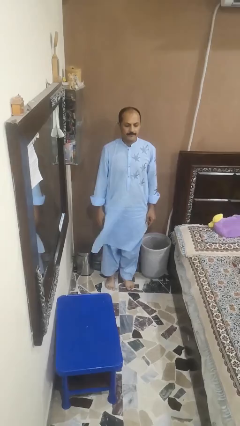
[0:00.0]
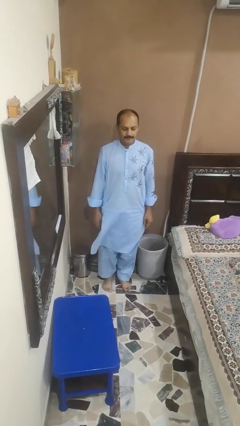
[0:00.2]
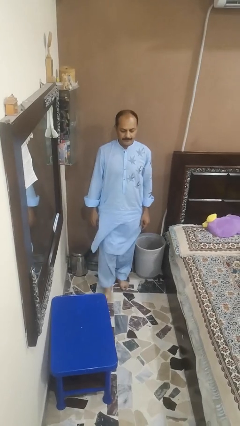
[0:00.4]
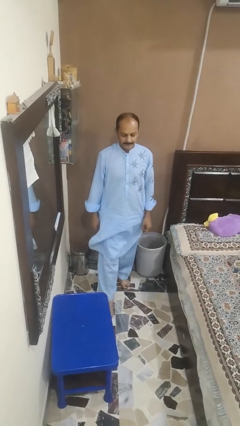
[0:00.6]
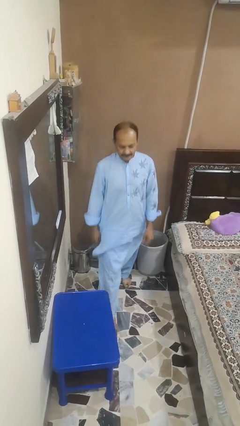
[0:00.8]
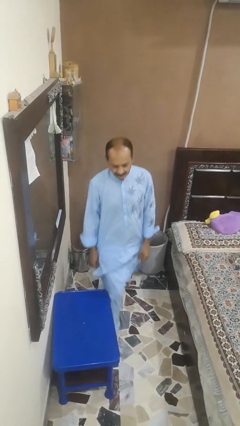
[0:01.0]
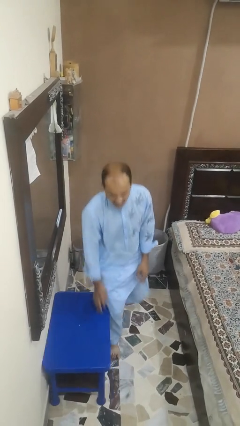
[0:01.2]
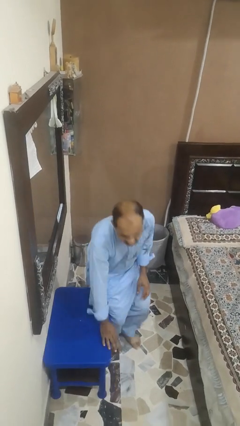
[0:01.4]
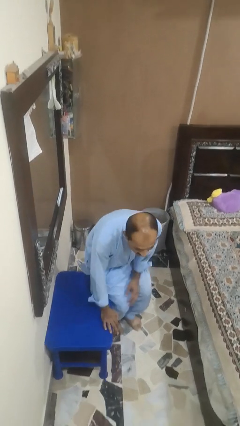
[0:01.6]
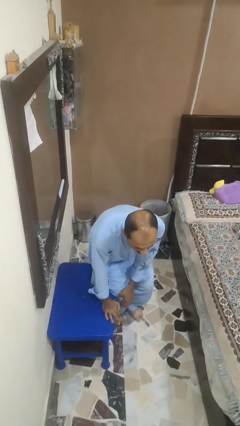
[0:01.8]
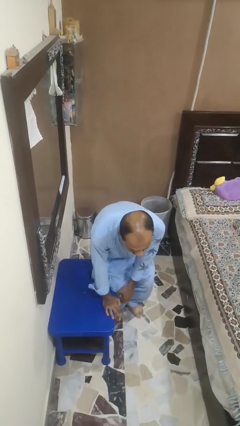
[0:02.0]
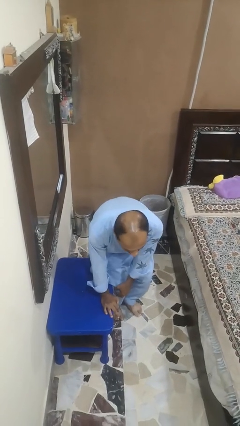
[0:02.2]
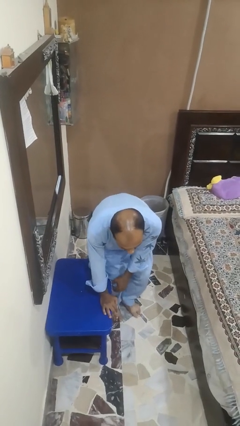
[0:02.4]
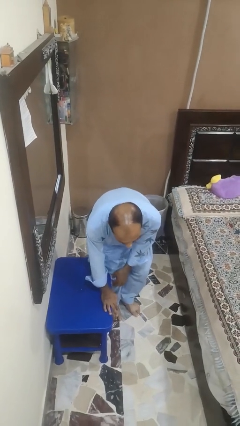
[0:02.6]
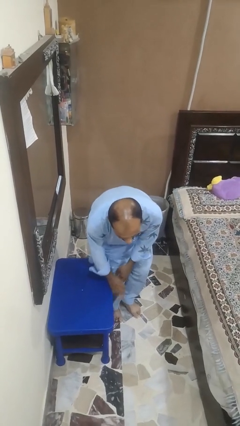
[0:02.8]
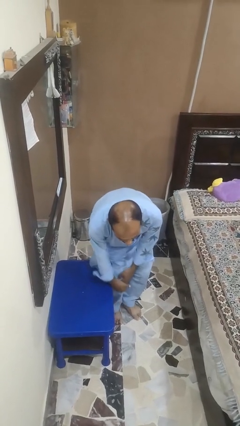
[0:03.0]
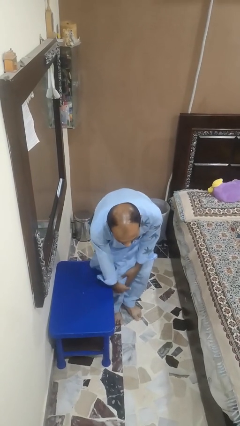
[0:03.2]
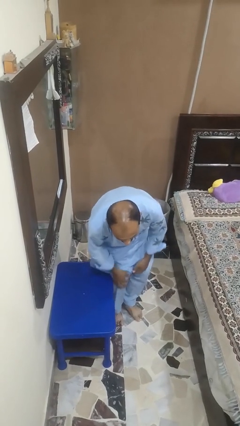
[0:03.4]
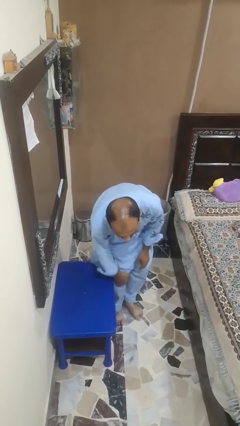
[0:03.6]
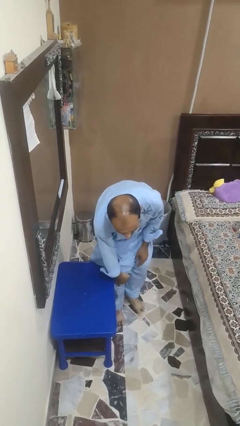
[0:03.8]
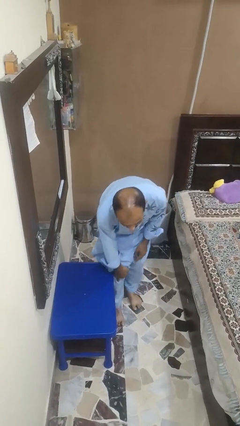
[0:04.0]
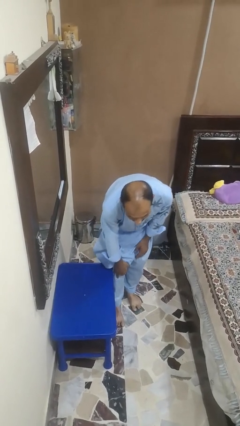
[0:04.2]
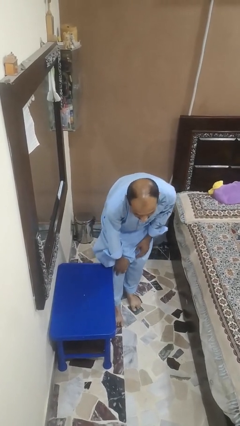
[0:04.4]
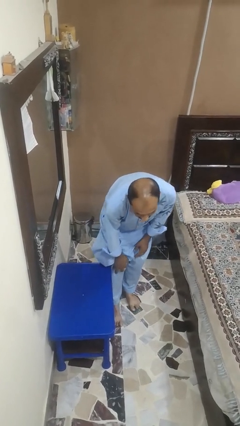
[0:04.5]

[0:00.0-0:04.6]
person bumps into table

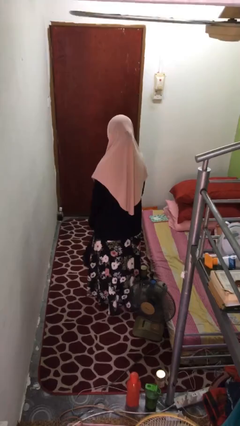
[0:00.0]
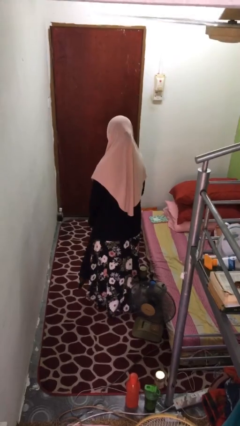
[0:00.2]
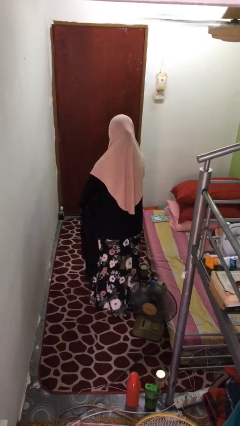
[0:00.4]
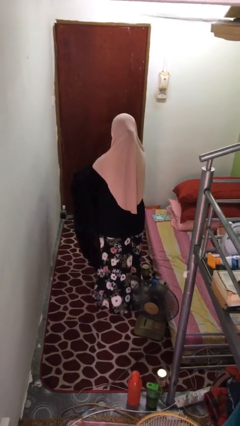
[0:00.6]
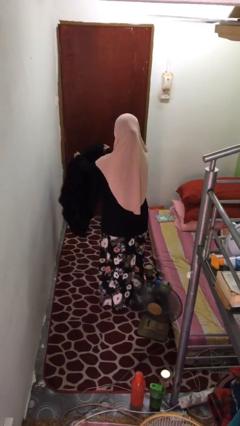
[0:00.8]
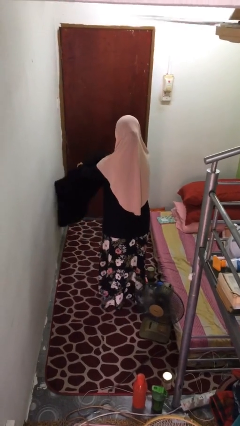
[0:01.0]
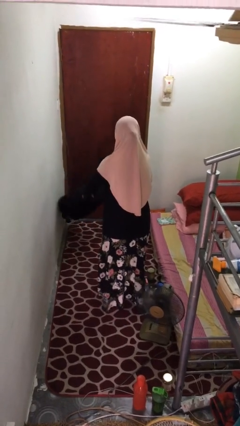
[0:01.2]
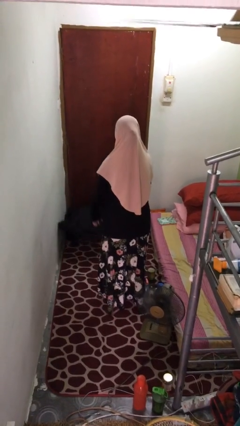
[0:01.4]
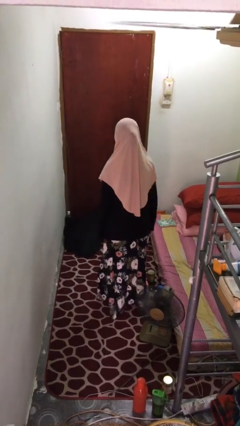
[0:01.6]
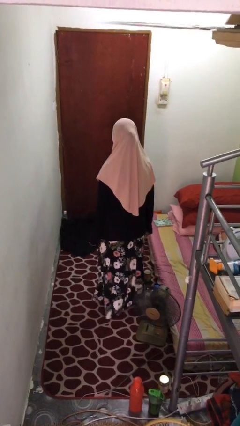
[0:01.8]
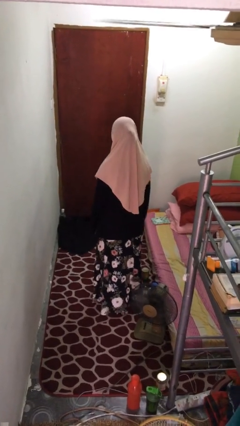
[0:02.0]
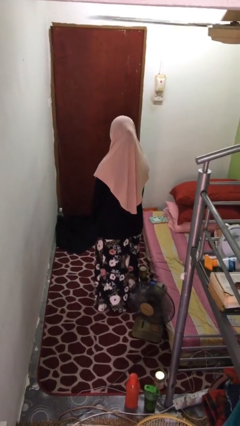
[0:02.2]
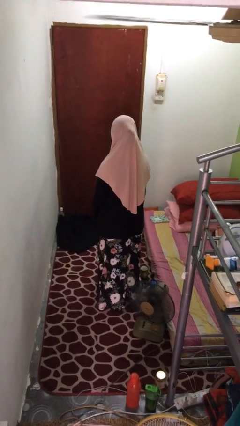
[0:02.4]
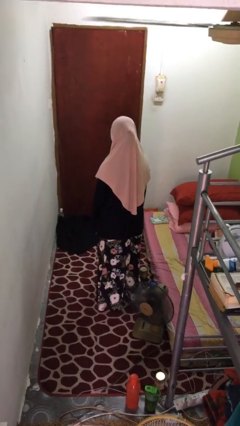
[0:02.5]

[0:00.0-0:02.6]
person throws object to ground

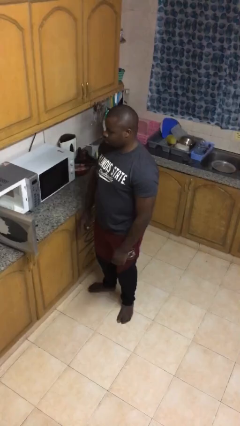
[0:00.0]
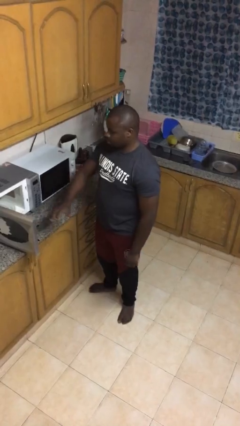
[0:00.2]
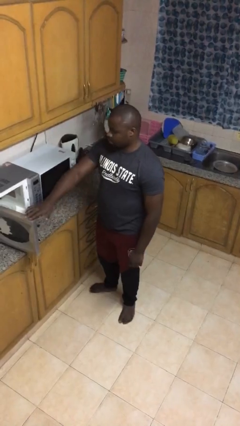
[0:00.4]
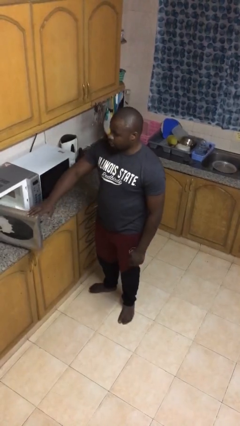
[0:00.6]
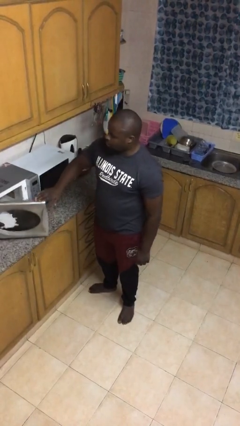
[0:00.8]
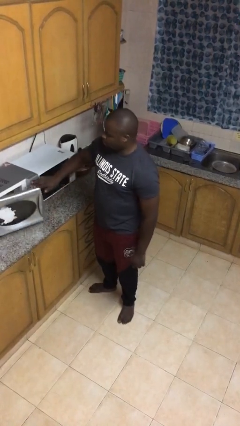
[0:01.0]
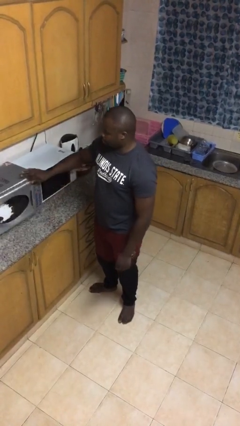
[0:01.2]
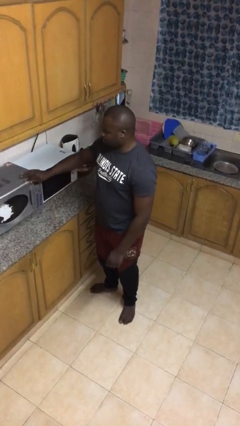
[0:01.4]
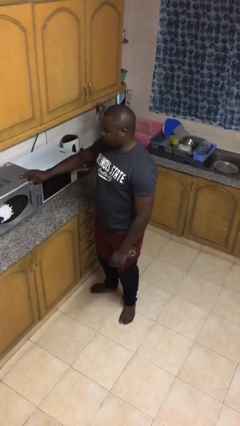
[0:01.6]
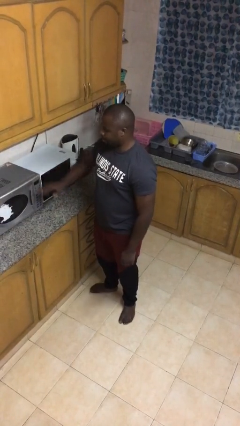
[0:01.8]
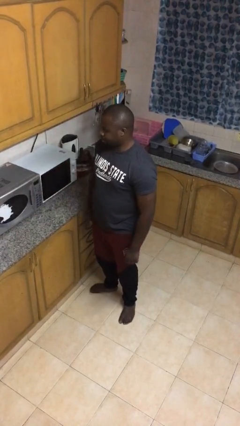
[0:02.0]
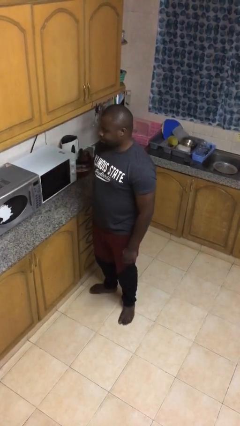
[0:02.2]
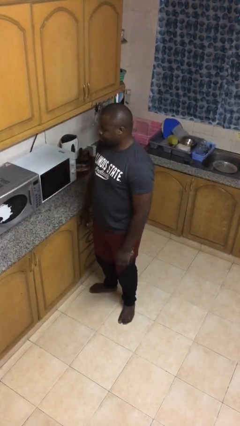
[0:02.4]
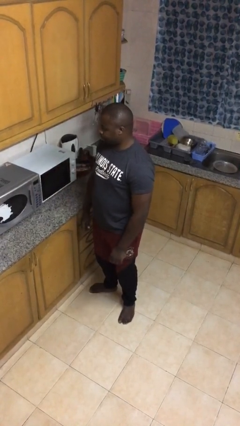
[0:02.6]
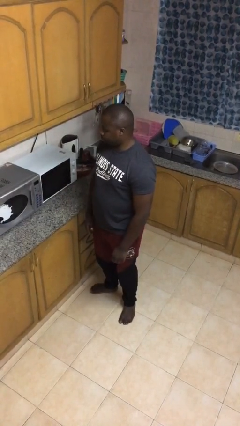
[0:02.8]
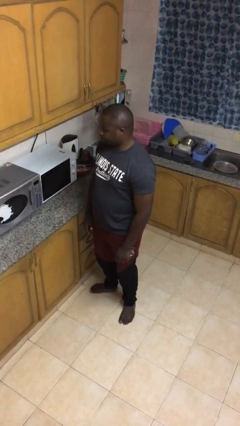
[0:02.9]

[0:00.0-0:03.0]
person closes microwave

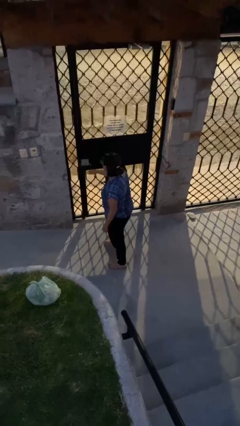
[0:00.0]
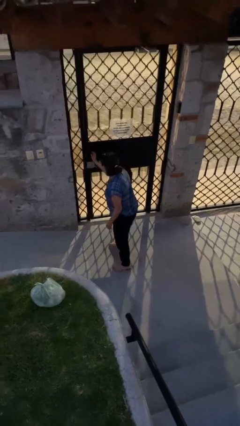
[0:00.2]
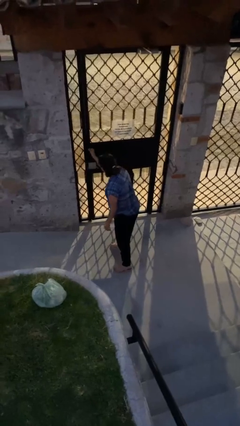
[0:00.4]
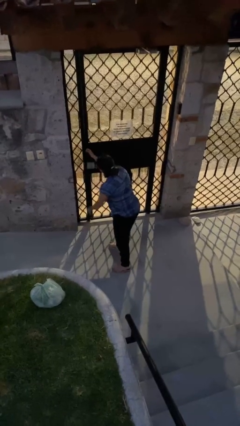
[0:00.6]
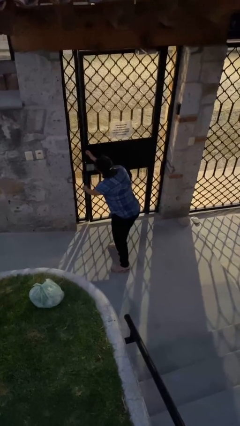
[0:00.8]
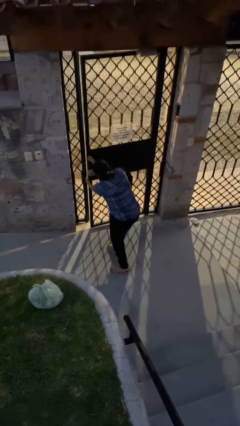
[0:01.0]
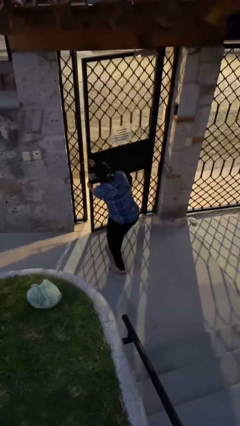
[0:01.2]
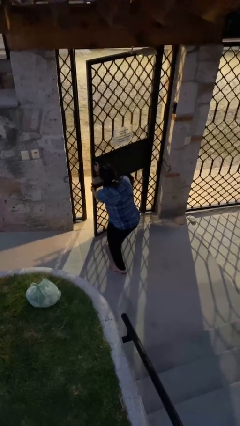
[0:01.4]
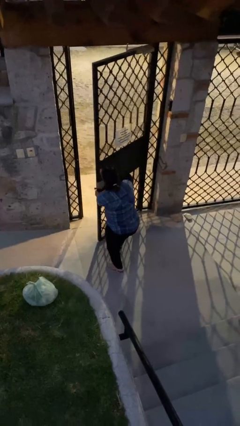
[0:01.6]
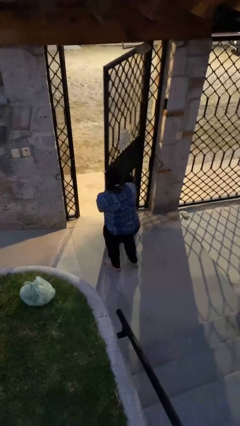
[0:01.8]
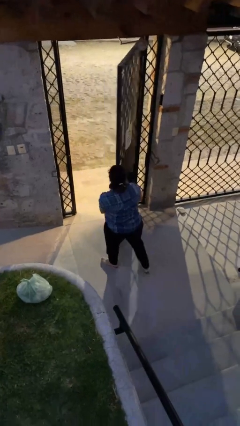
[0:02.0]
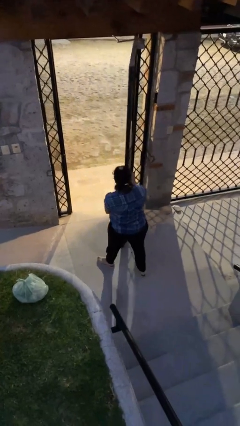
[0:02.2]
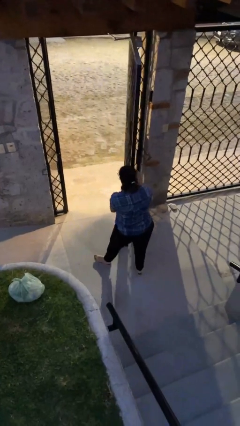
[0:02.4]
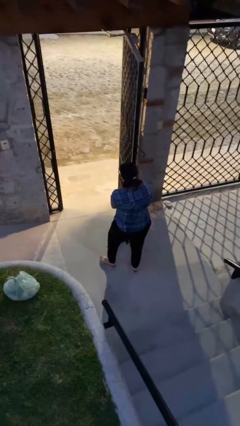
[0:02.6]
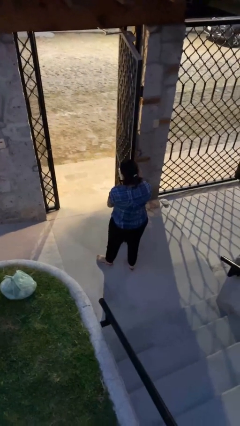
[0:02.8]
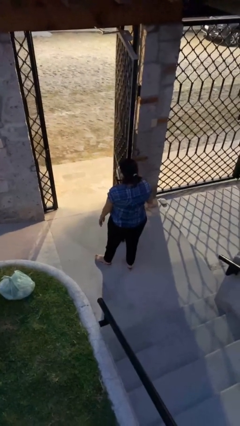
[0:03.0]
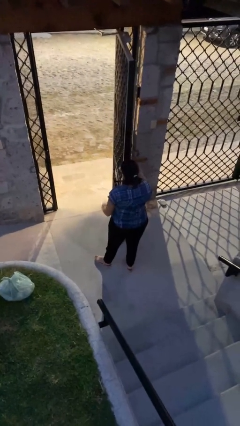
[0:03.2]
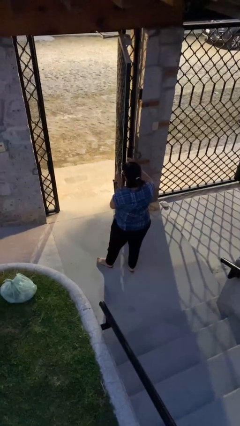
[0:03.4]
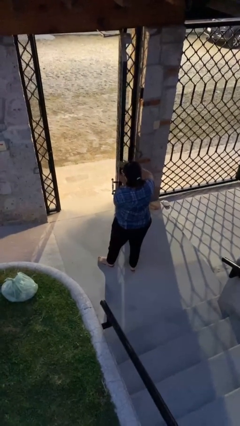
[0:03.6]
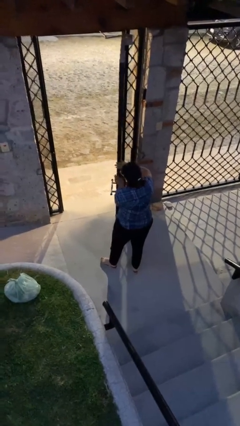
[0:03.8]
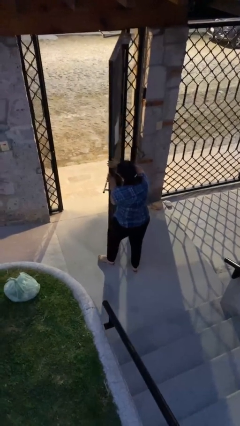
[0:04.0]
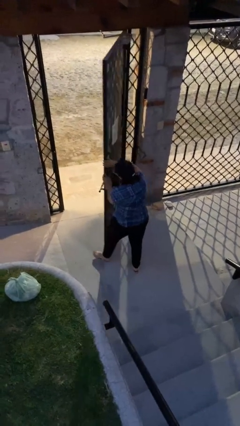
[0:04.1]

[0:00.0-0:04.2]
person opens facility door

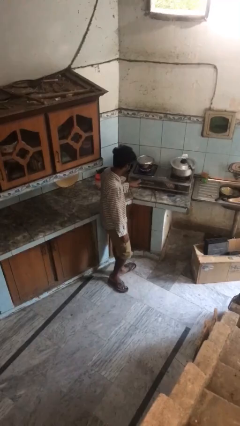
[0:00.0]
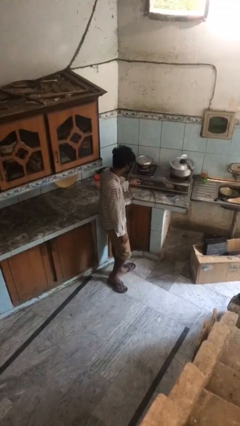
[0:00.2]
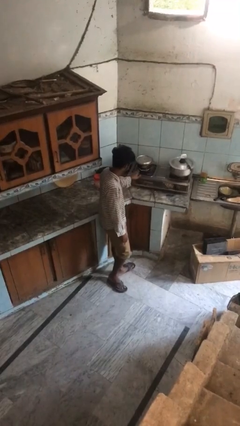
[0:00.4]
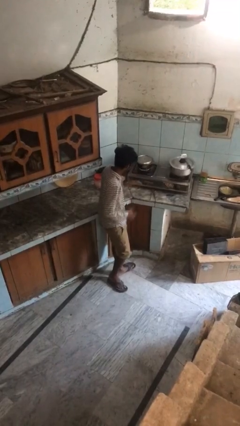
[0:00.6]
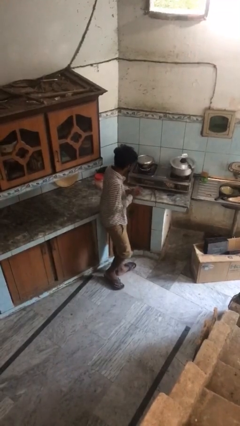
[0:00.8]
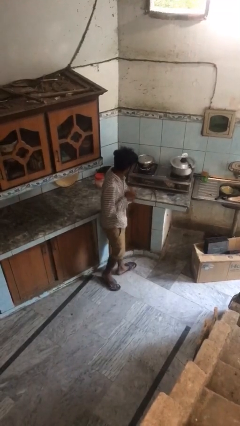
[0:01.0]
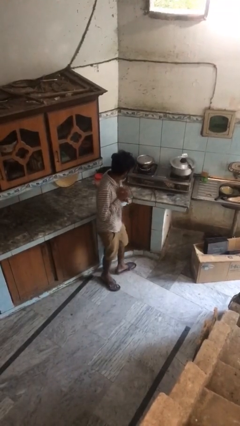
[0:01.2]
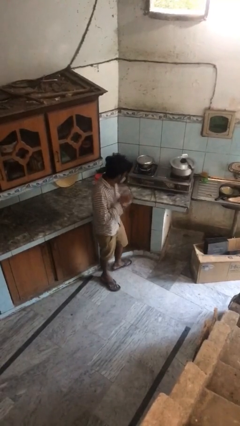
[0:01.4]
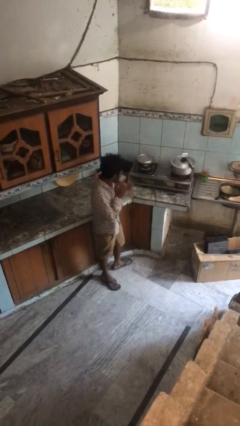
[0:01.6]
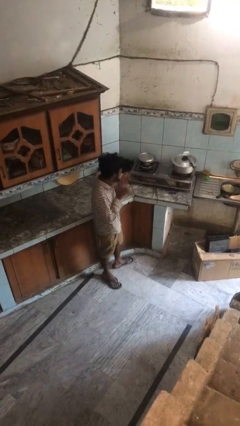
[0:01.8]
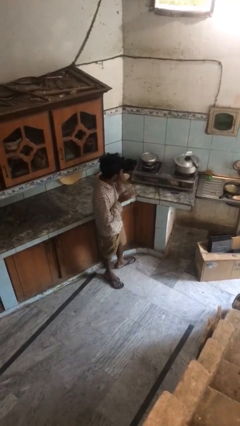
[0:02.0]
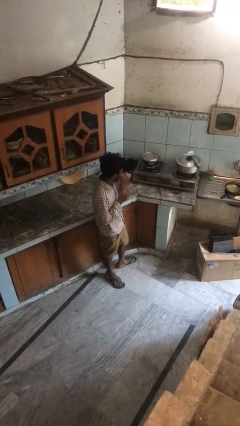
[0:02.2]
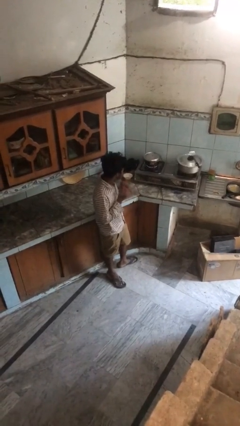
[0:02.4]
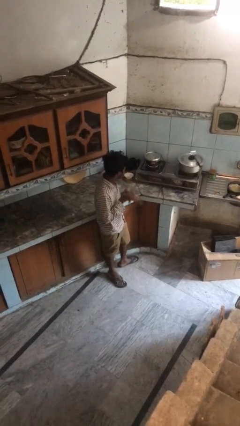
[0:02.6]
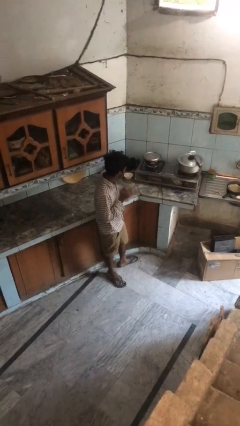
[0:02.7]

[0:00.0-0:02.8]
person burns hand

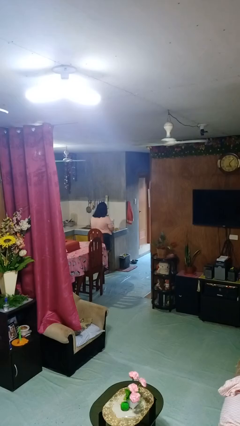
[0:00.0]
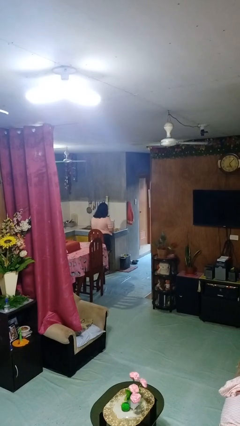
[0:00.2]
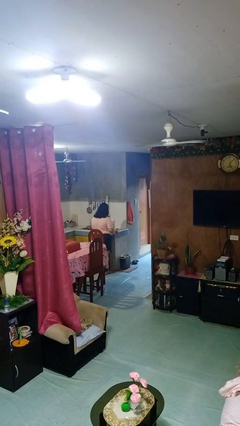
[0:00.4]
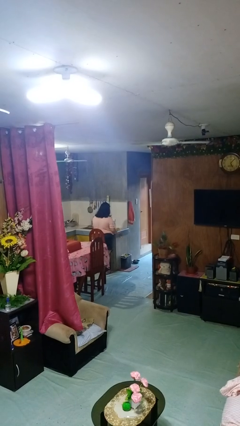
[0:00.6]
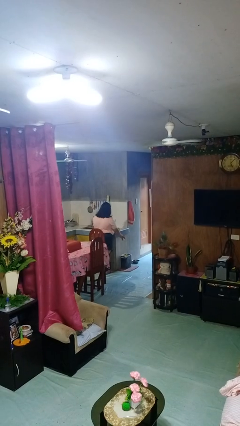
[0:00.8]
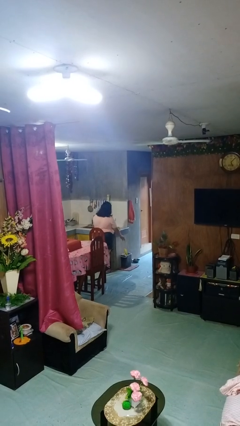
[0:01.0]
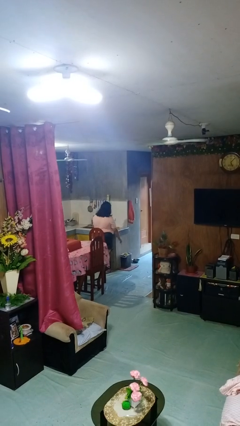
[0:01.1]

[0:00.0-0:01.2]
person discards trash
